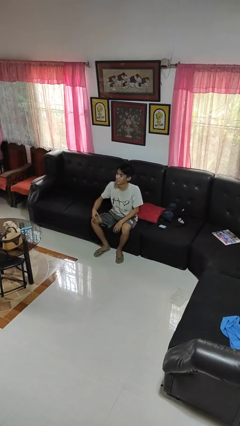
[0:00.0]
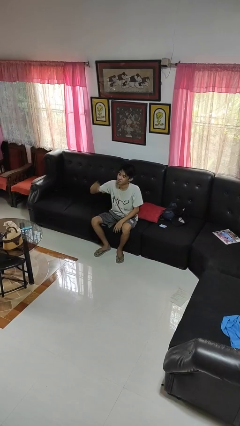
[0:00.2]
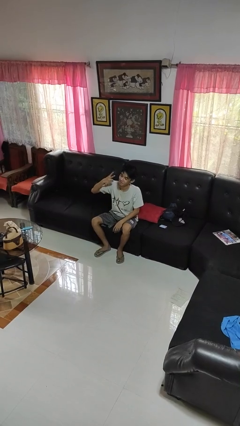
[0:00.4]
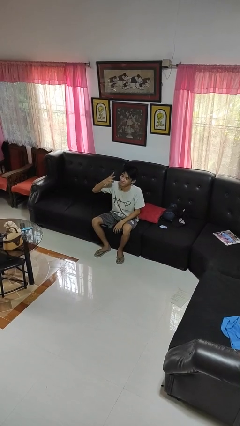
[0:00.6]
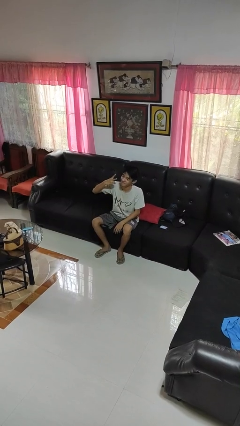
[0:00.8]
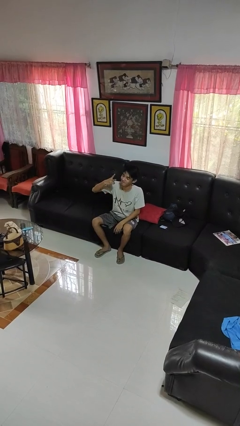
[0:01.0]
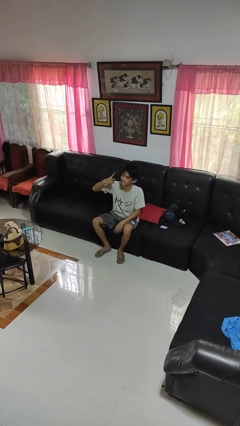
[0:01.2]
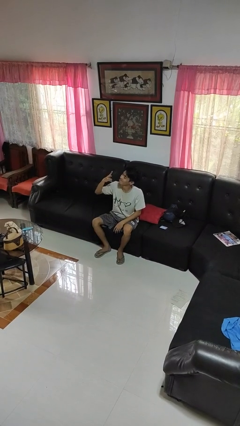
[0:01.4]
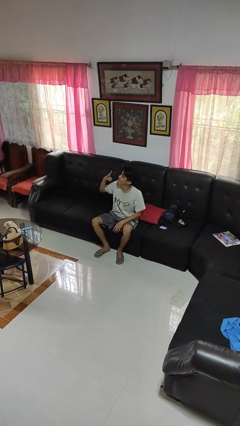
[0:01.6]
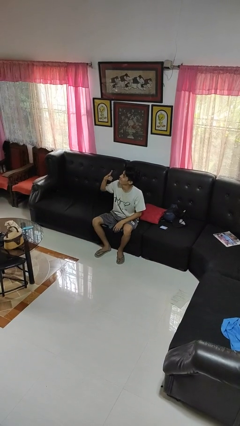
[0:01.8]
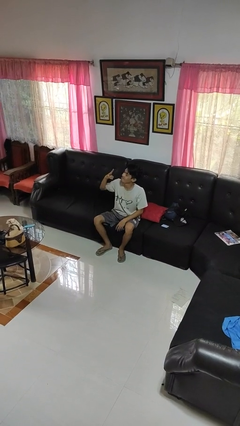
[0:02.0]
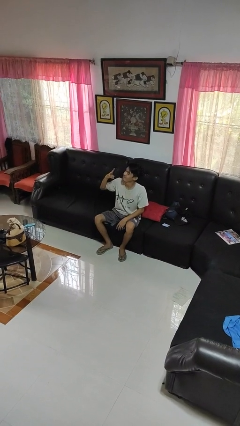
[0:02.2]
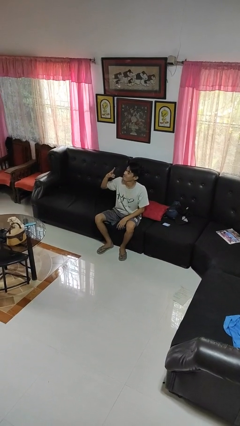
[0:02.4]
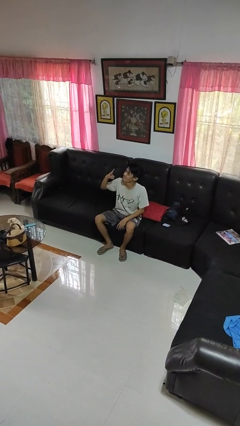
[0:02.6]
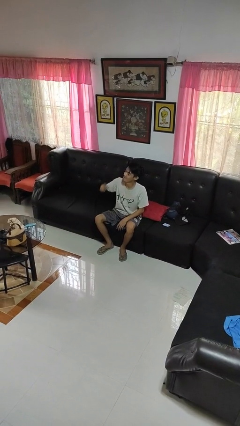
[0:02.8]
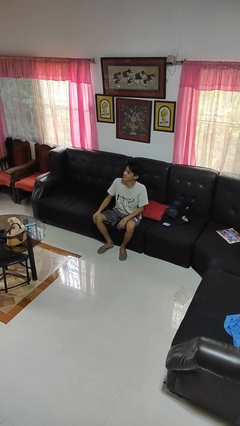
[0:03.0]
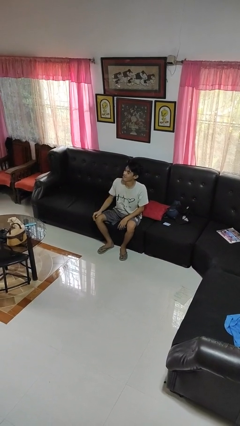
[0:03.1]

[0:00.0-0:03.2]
person gestures peace

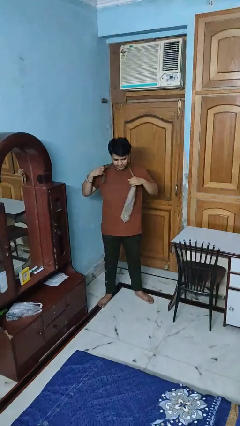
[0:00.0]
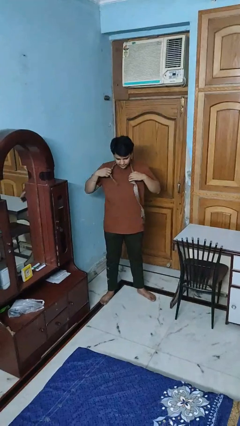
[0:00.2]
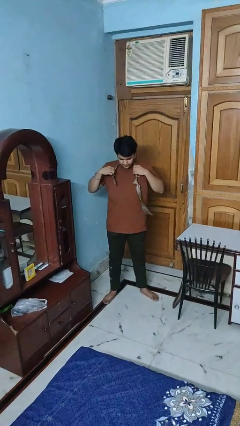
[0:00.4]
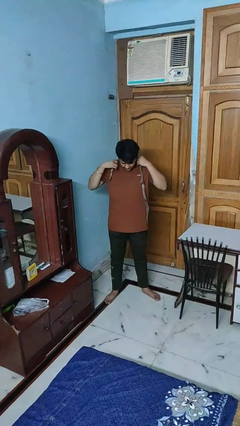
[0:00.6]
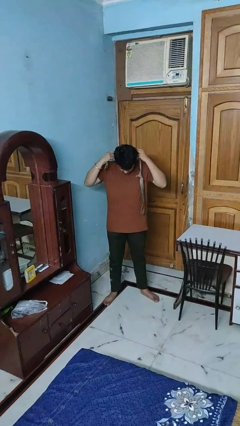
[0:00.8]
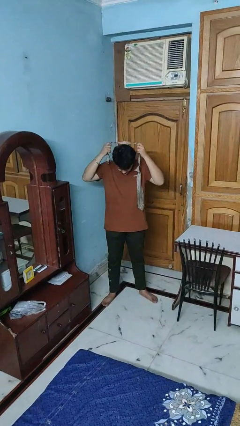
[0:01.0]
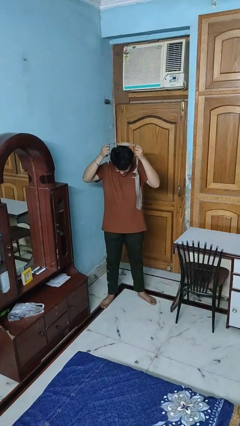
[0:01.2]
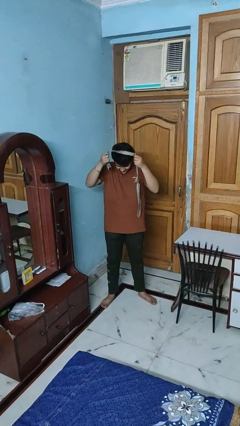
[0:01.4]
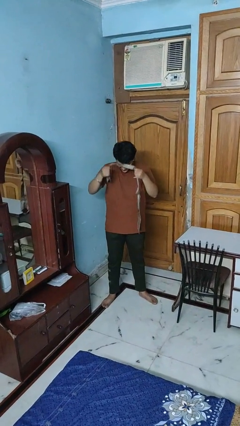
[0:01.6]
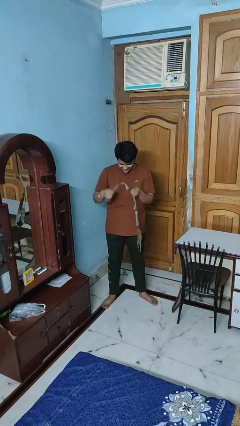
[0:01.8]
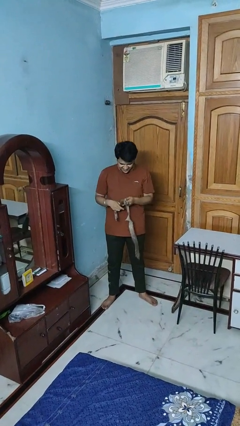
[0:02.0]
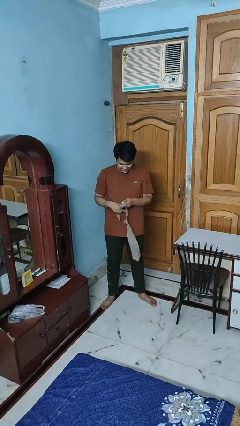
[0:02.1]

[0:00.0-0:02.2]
person takes off necktie

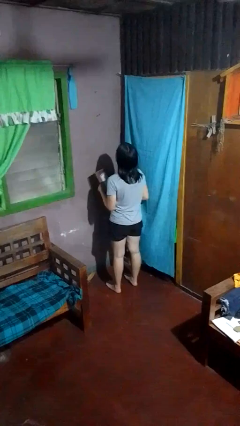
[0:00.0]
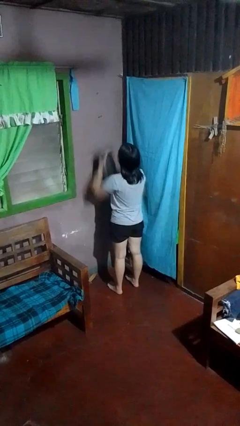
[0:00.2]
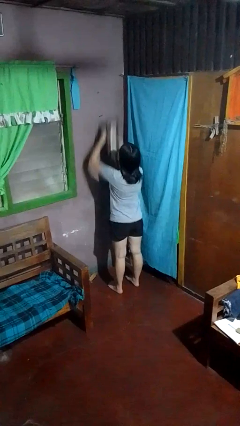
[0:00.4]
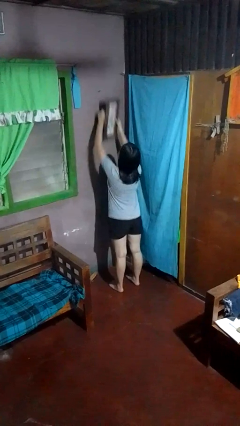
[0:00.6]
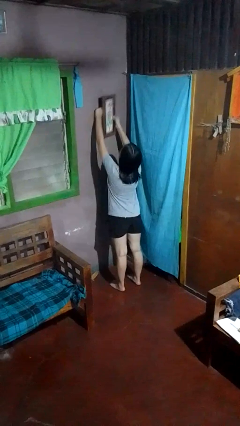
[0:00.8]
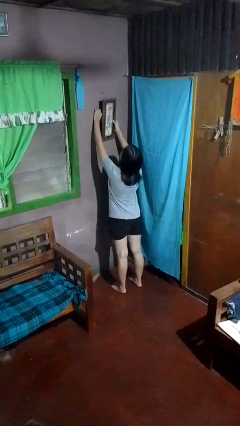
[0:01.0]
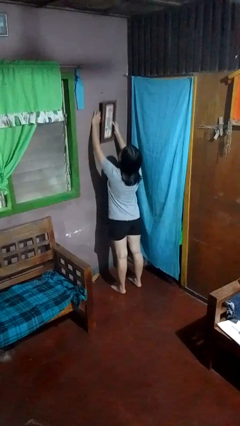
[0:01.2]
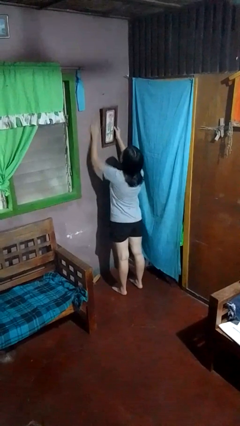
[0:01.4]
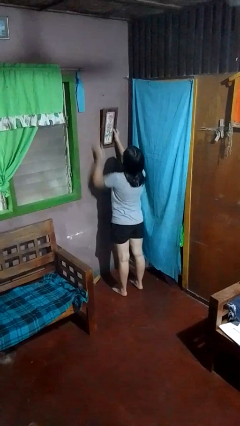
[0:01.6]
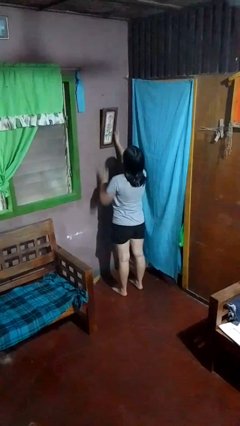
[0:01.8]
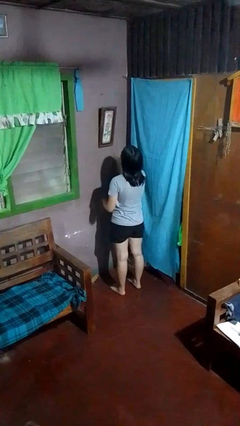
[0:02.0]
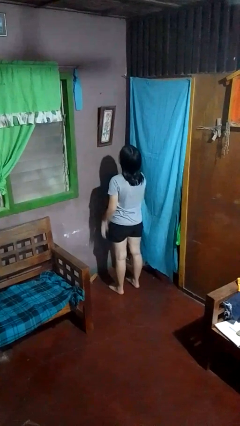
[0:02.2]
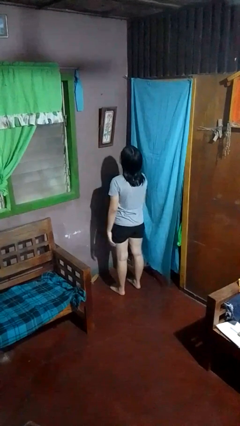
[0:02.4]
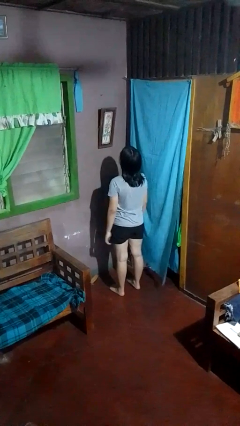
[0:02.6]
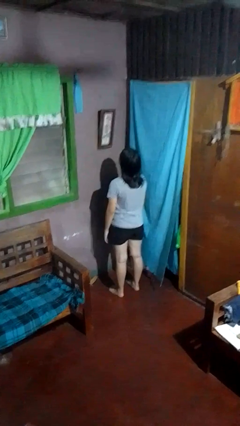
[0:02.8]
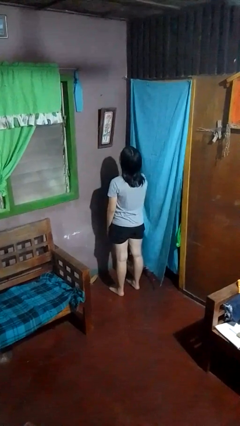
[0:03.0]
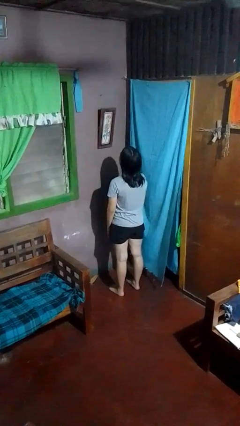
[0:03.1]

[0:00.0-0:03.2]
person puts up picture frame

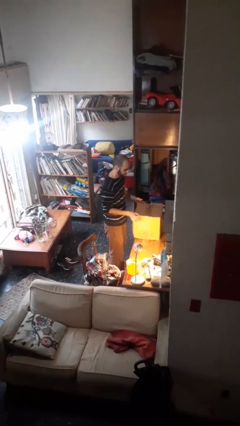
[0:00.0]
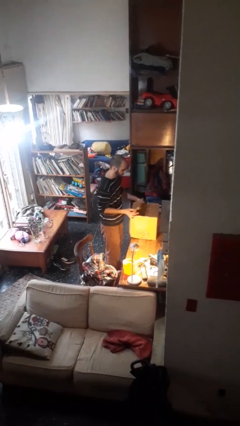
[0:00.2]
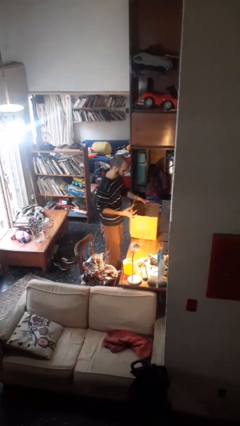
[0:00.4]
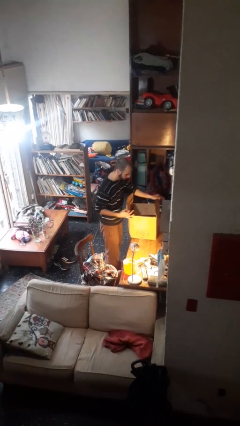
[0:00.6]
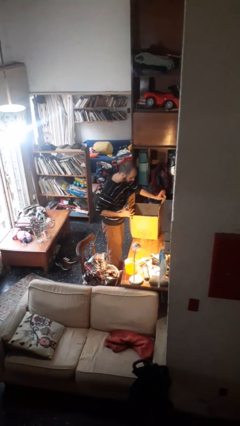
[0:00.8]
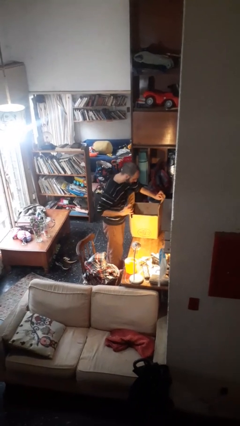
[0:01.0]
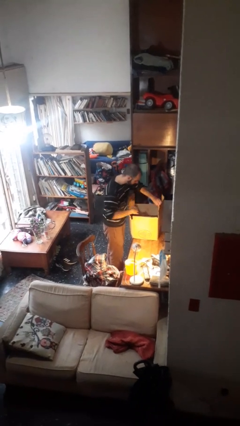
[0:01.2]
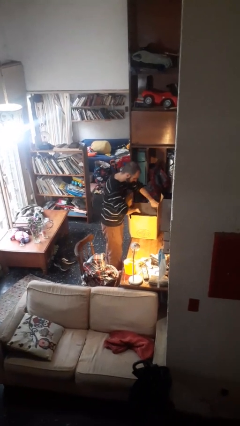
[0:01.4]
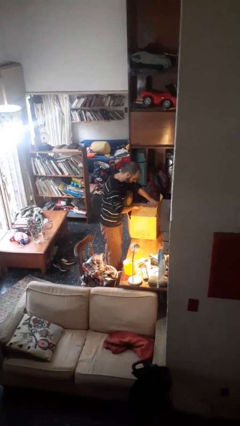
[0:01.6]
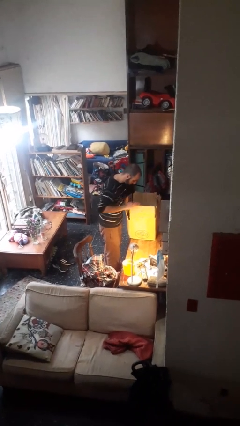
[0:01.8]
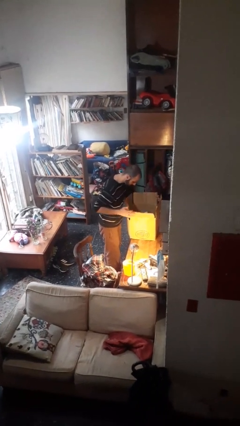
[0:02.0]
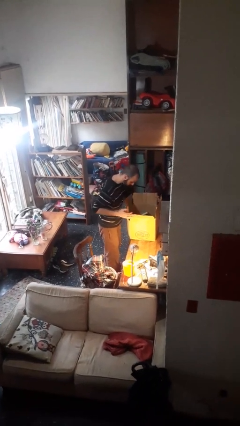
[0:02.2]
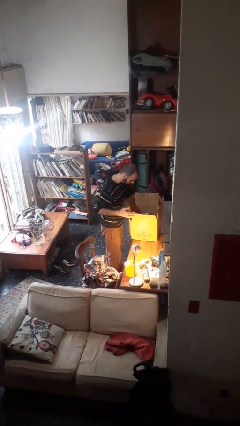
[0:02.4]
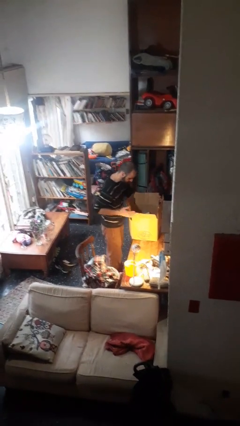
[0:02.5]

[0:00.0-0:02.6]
person opens box

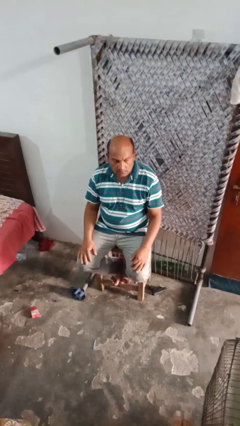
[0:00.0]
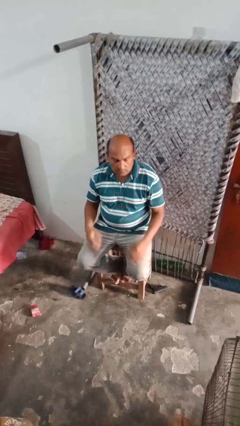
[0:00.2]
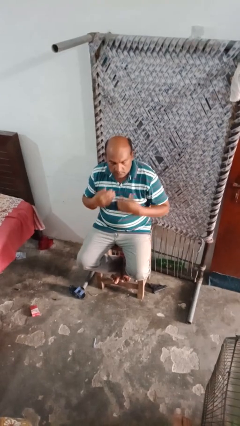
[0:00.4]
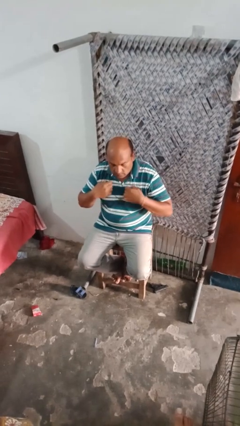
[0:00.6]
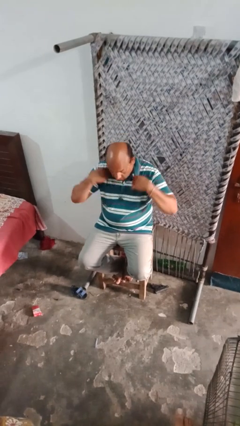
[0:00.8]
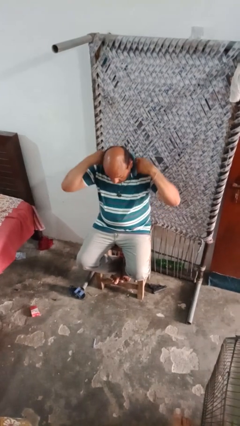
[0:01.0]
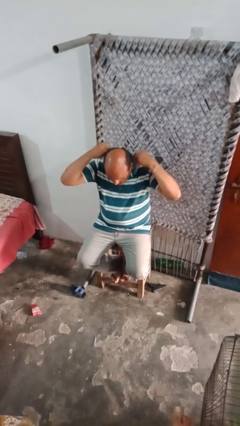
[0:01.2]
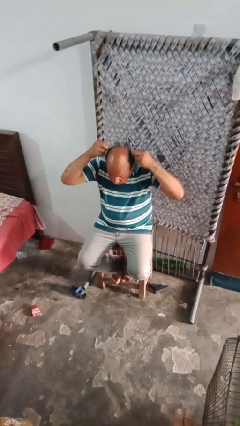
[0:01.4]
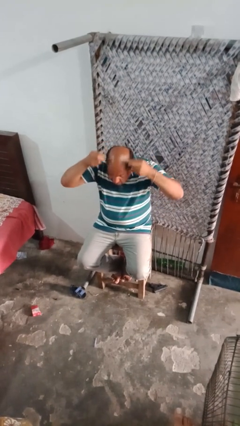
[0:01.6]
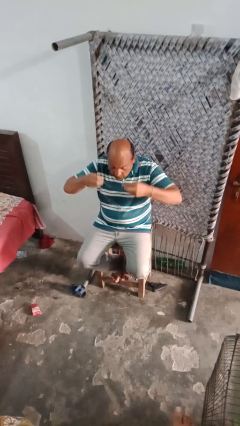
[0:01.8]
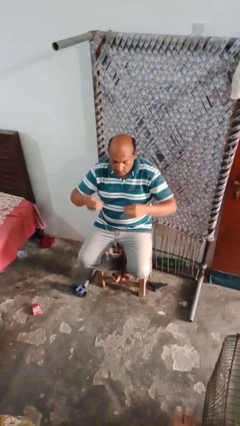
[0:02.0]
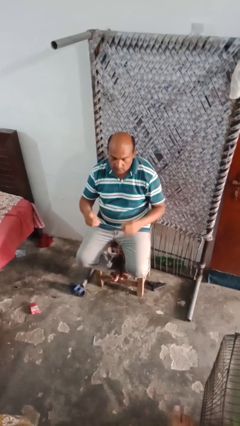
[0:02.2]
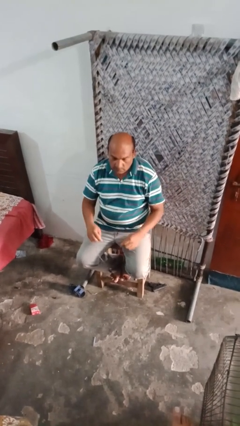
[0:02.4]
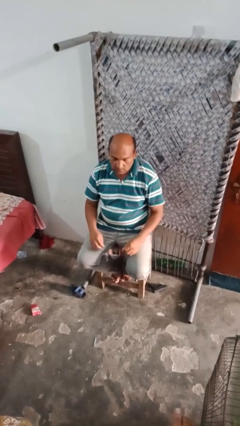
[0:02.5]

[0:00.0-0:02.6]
person takes off necklace

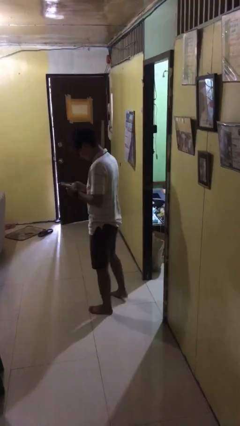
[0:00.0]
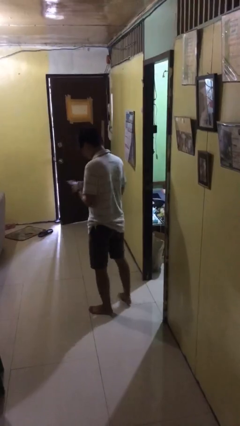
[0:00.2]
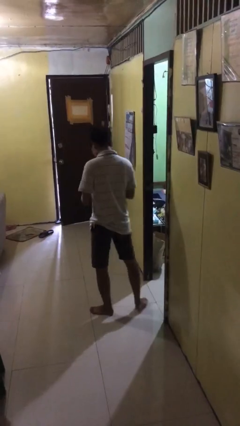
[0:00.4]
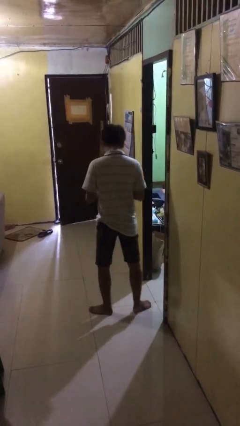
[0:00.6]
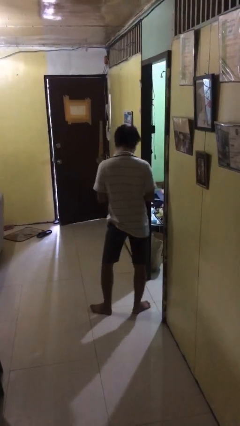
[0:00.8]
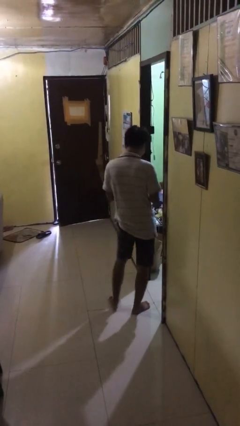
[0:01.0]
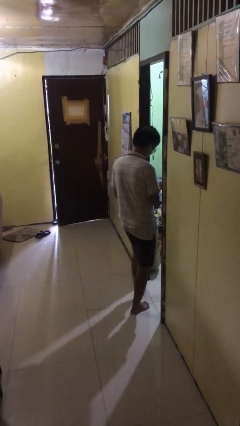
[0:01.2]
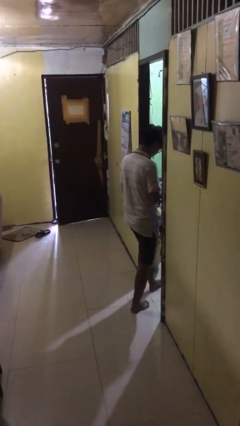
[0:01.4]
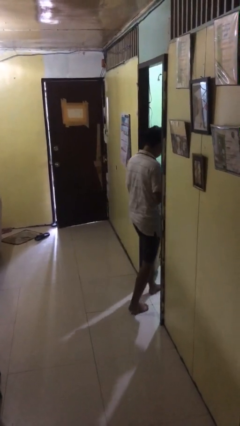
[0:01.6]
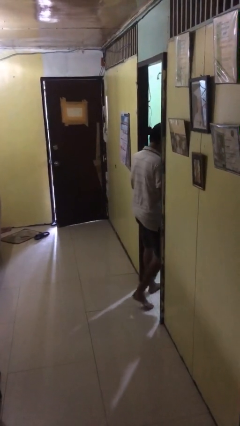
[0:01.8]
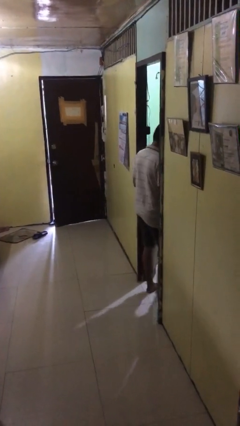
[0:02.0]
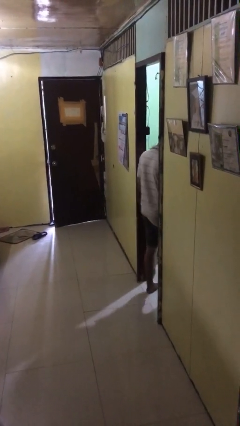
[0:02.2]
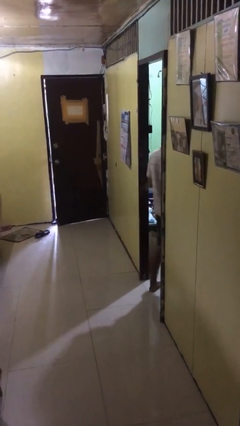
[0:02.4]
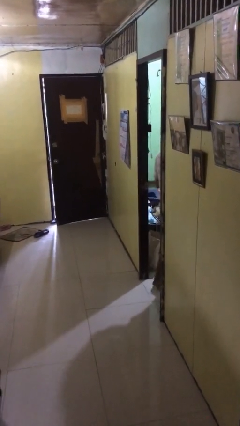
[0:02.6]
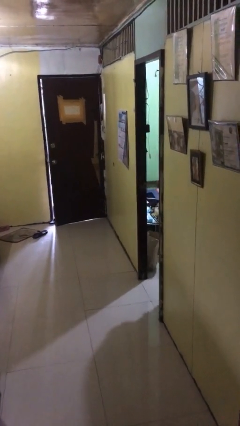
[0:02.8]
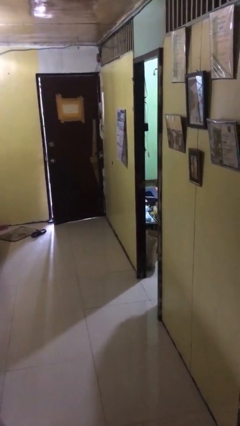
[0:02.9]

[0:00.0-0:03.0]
person exits scene through structure

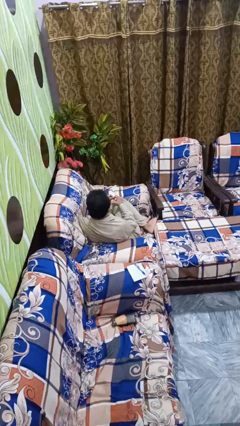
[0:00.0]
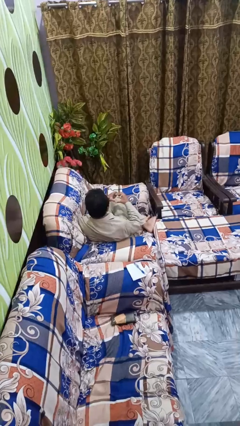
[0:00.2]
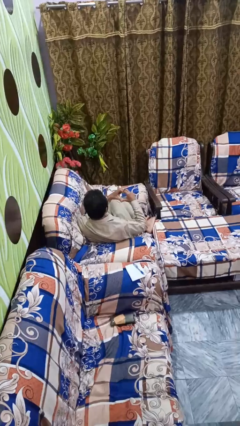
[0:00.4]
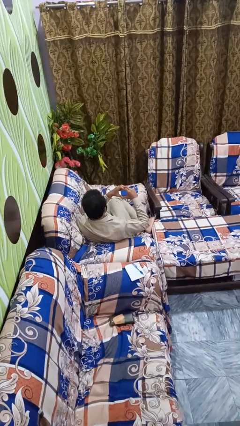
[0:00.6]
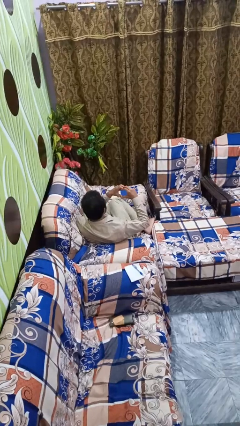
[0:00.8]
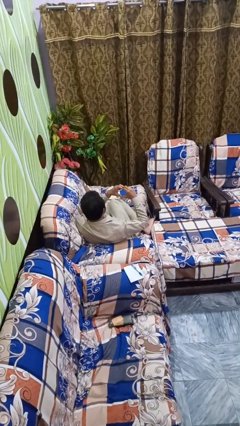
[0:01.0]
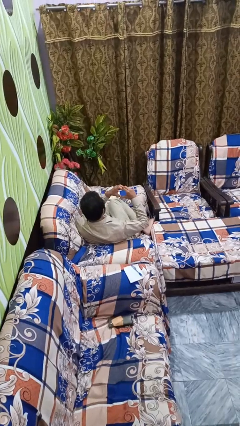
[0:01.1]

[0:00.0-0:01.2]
person gestures heart
